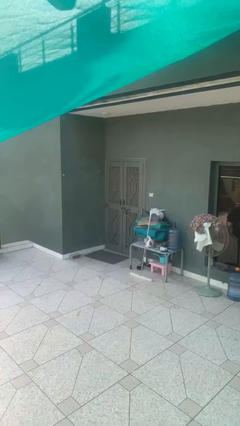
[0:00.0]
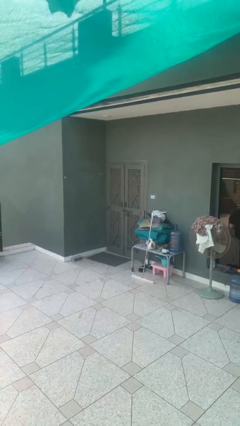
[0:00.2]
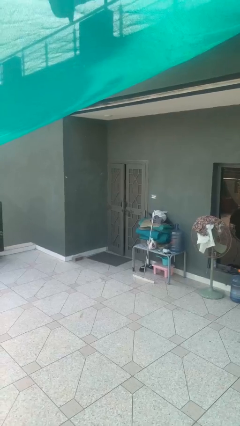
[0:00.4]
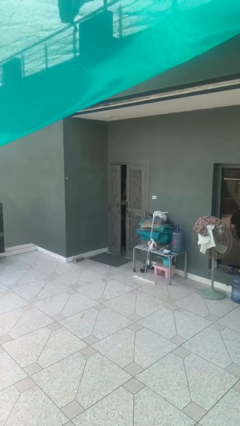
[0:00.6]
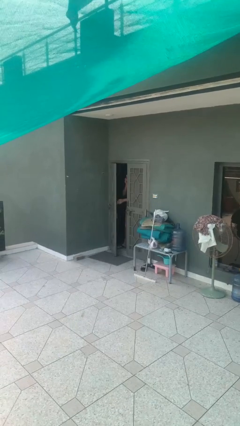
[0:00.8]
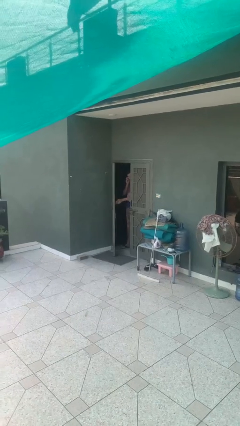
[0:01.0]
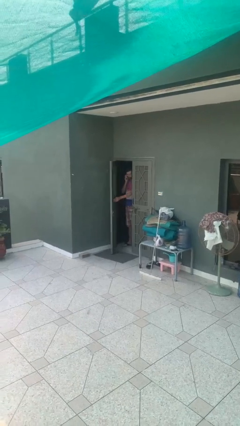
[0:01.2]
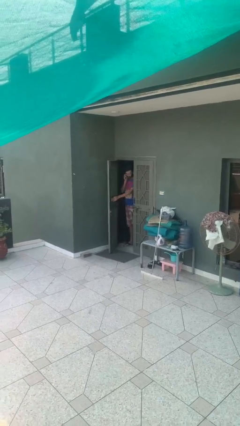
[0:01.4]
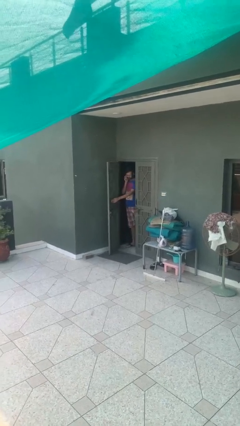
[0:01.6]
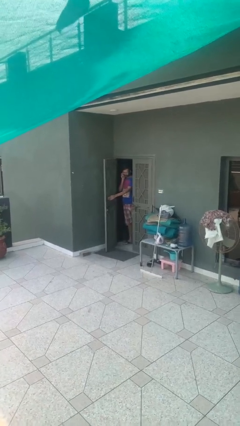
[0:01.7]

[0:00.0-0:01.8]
person opens facility door

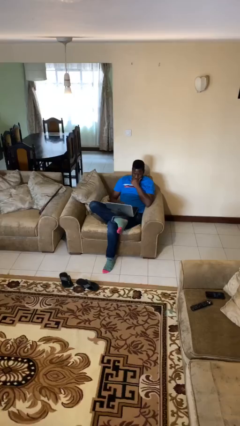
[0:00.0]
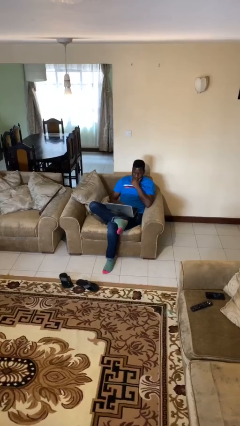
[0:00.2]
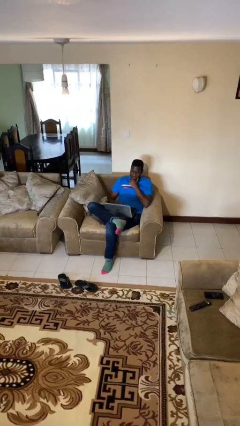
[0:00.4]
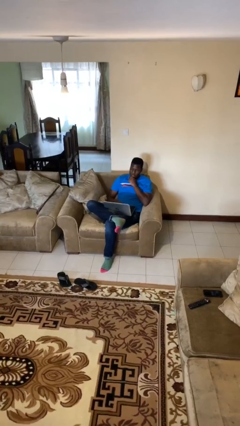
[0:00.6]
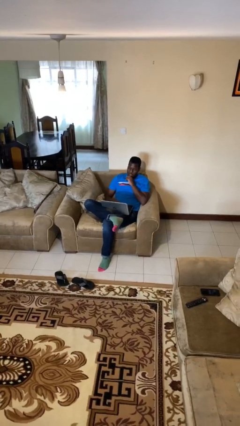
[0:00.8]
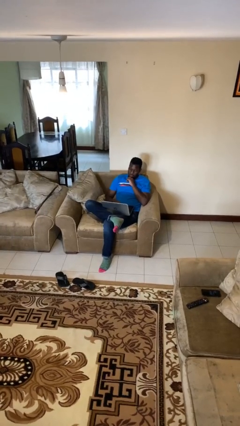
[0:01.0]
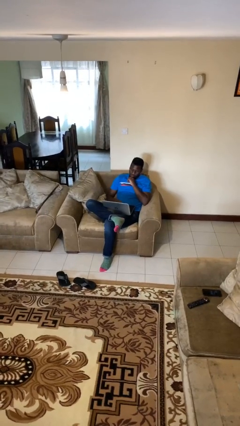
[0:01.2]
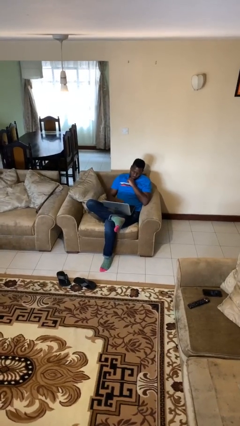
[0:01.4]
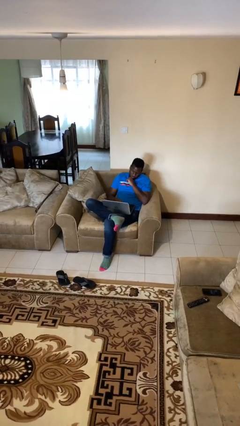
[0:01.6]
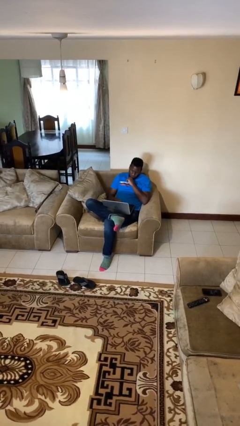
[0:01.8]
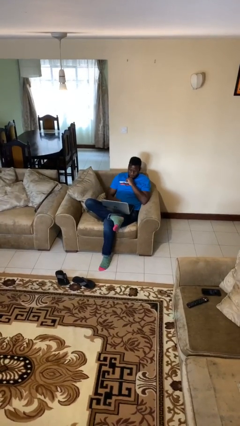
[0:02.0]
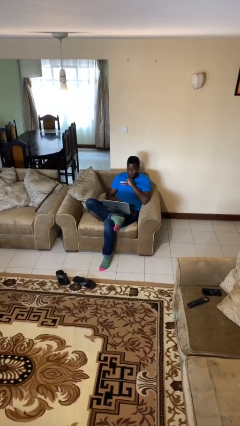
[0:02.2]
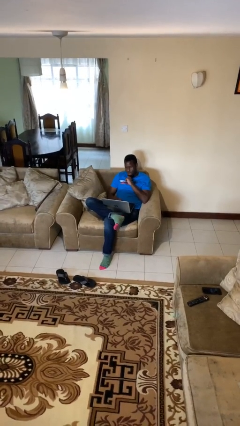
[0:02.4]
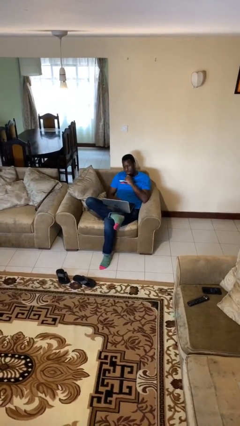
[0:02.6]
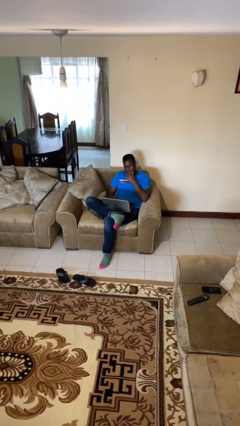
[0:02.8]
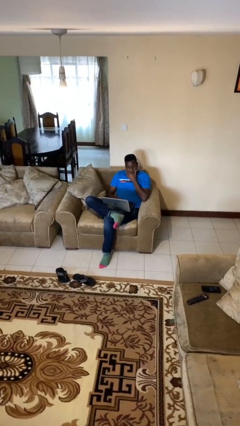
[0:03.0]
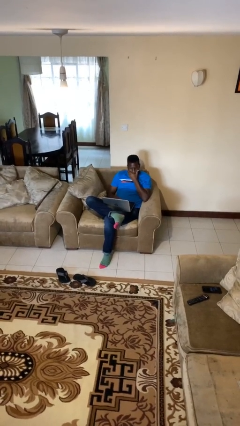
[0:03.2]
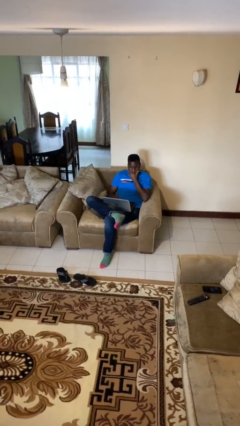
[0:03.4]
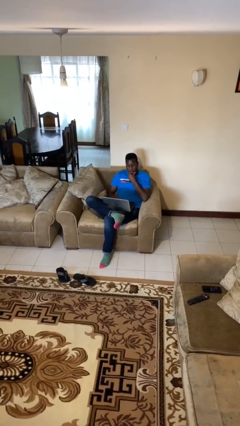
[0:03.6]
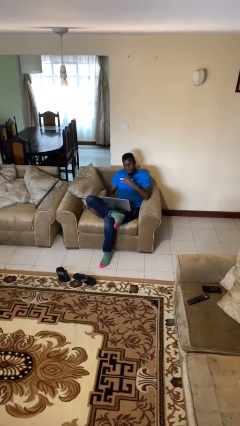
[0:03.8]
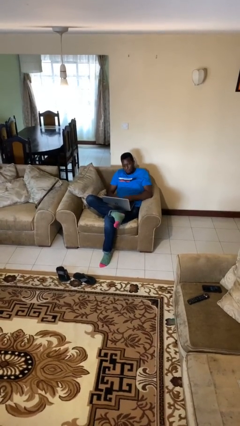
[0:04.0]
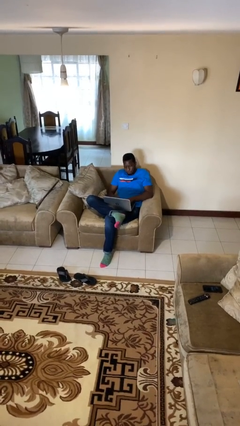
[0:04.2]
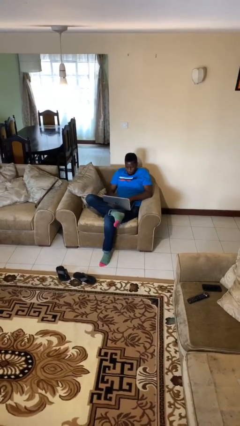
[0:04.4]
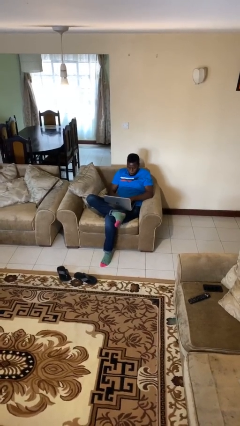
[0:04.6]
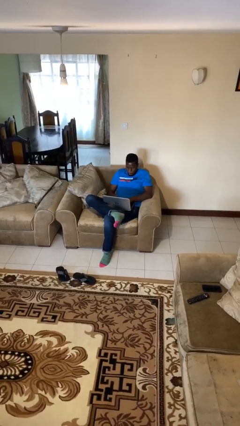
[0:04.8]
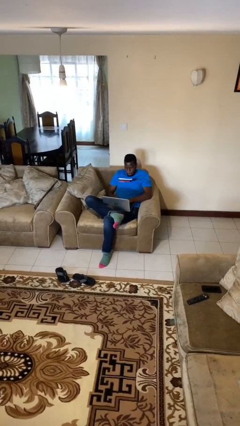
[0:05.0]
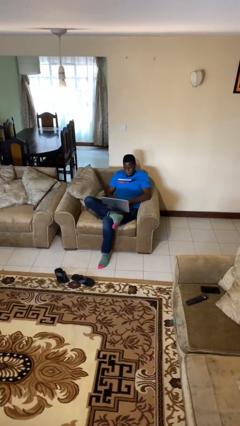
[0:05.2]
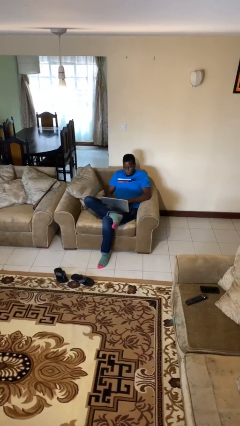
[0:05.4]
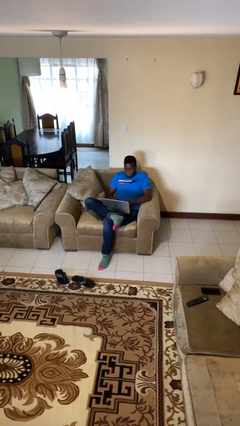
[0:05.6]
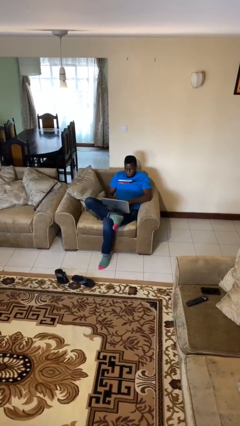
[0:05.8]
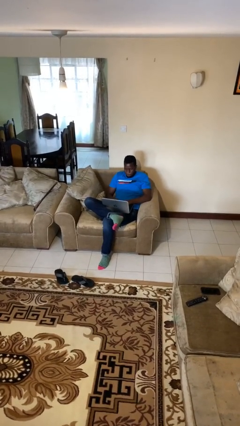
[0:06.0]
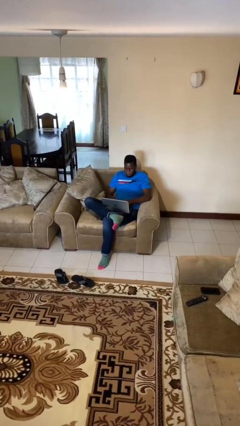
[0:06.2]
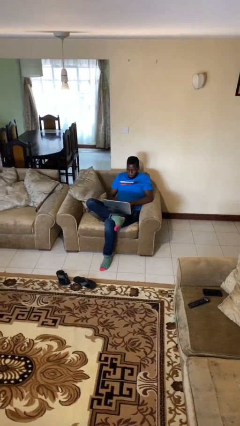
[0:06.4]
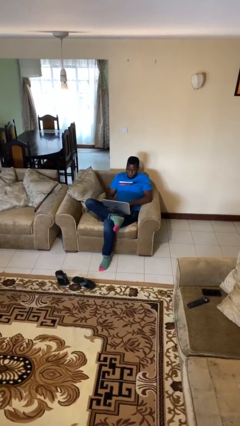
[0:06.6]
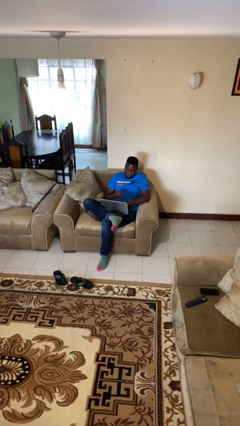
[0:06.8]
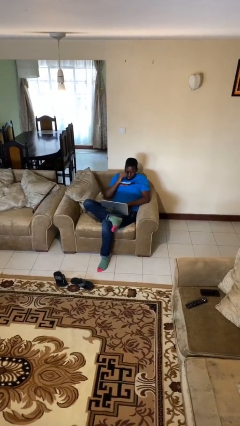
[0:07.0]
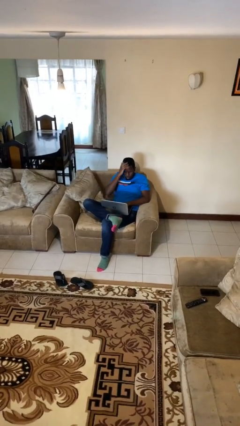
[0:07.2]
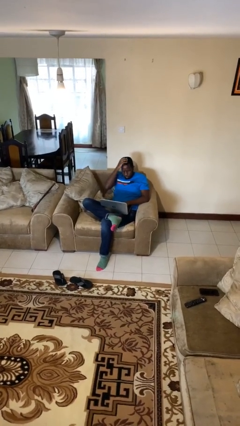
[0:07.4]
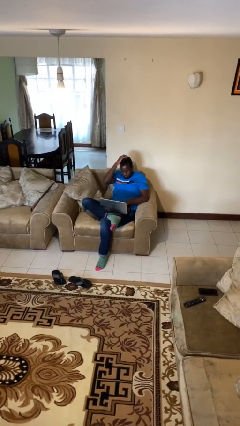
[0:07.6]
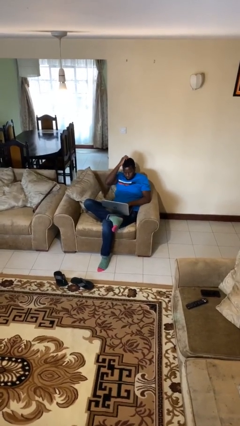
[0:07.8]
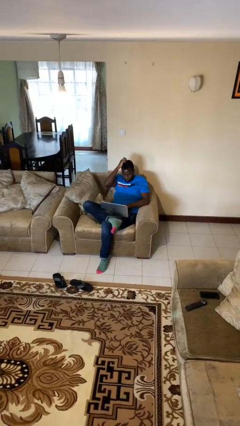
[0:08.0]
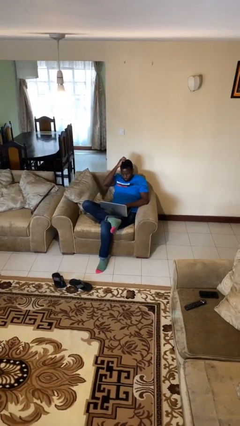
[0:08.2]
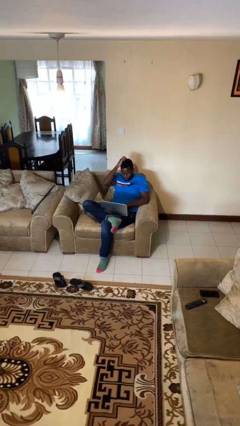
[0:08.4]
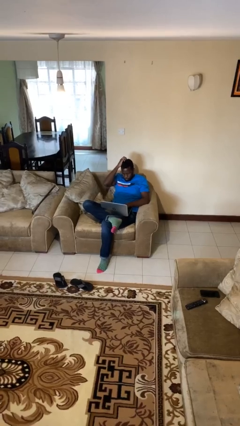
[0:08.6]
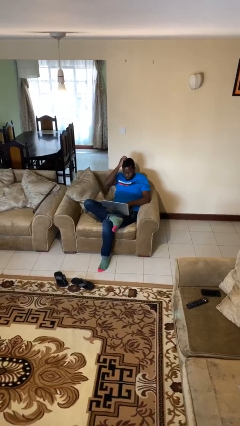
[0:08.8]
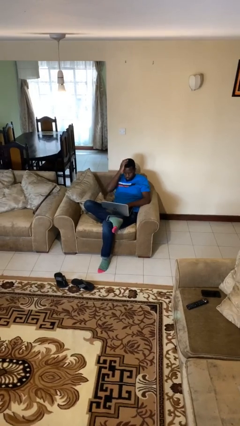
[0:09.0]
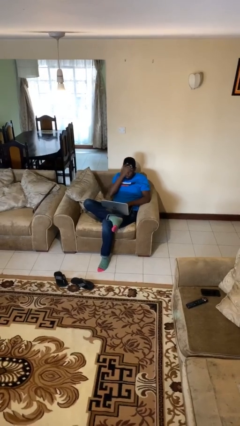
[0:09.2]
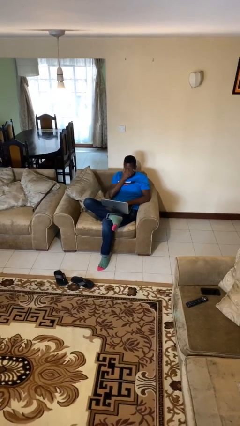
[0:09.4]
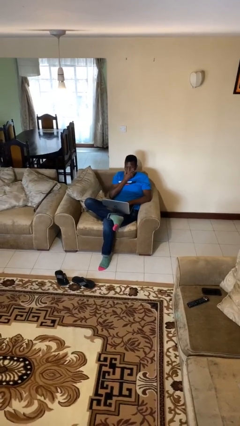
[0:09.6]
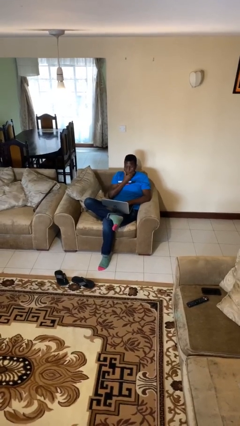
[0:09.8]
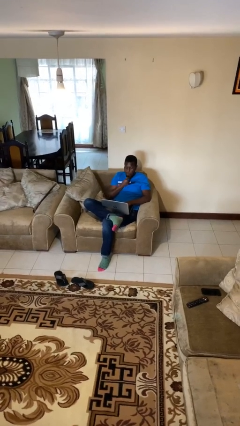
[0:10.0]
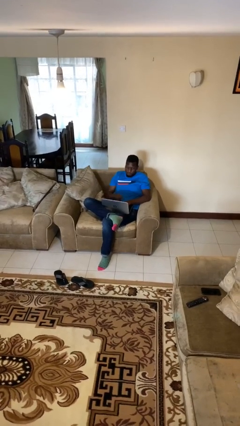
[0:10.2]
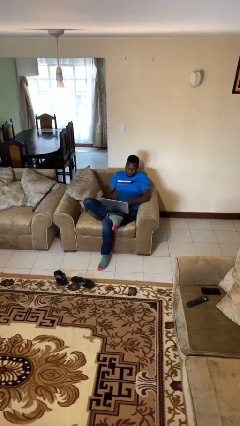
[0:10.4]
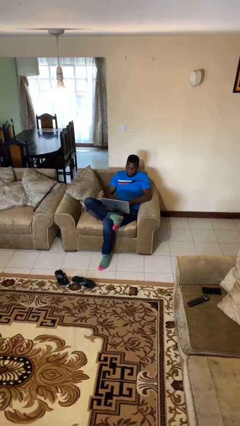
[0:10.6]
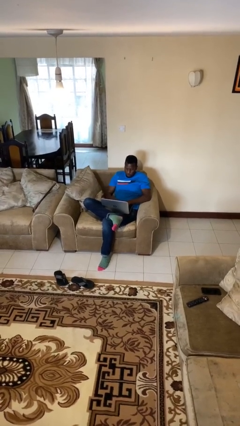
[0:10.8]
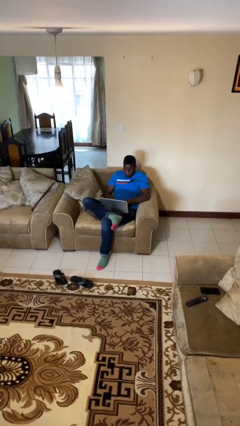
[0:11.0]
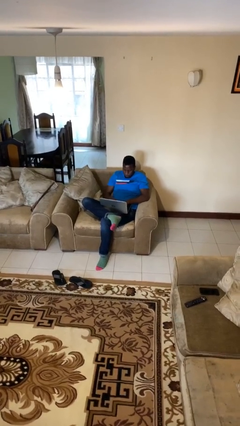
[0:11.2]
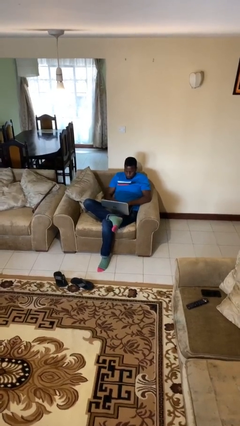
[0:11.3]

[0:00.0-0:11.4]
person interacts with laptop

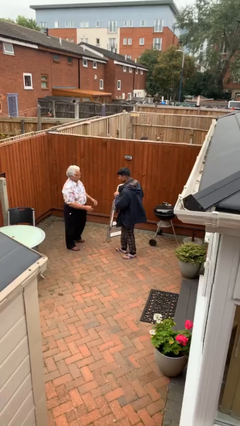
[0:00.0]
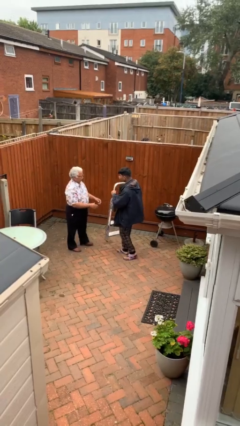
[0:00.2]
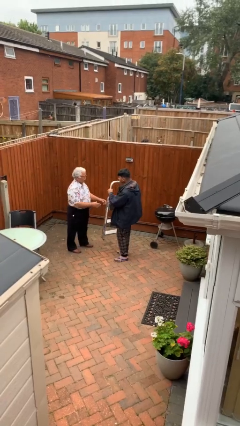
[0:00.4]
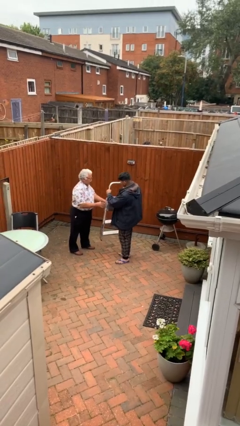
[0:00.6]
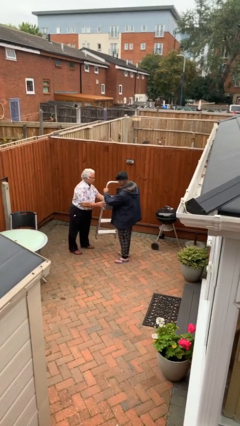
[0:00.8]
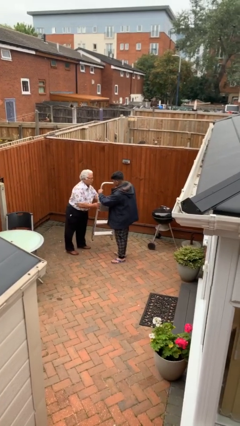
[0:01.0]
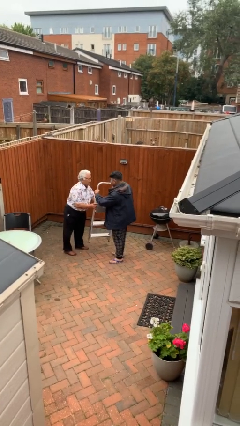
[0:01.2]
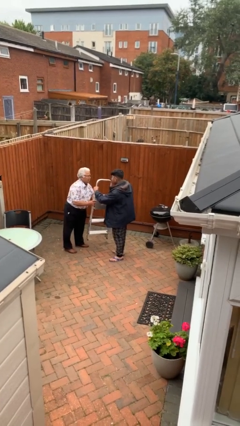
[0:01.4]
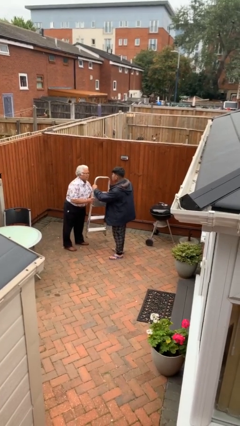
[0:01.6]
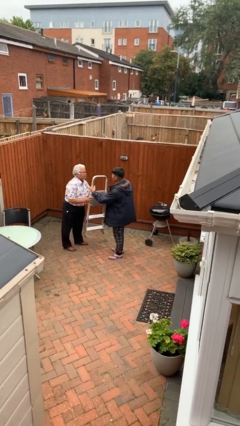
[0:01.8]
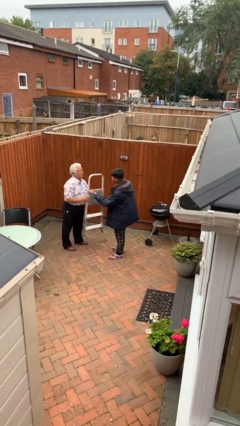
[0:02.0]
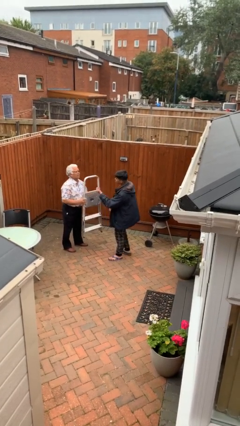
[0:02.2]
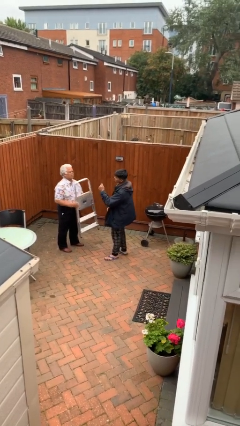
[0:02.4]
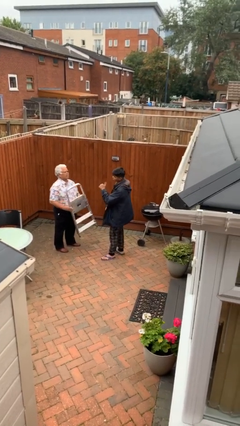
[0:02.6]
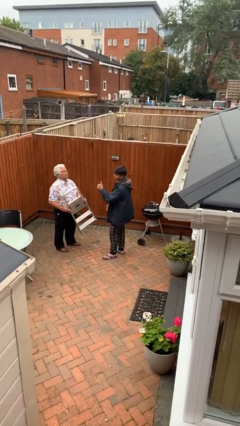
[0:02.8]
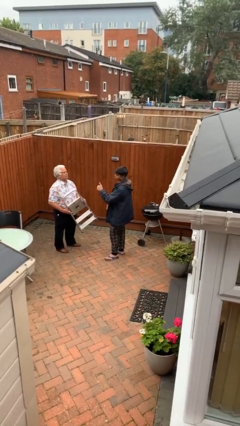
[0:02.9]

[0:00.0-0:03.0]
person transfers object to person

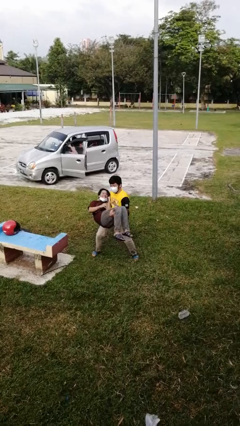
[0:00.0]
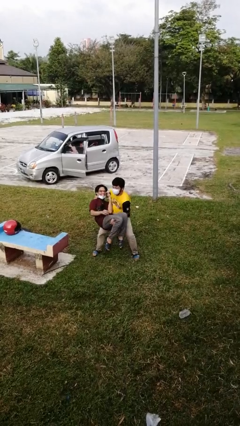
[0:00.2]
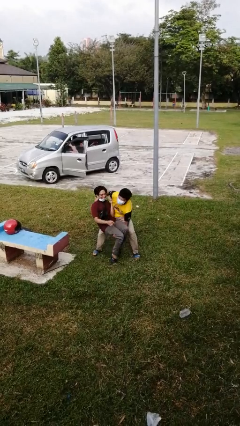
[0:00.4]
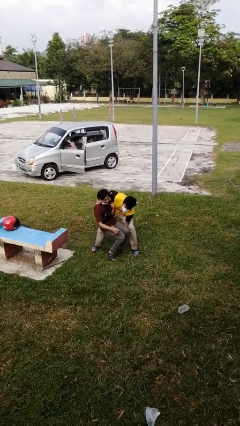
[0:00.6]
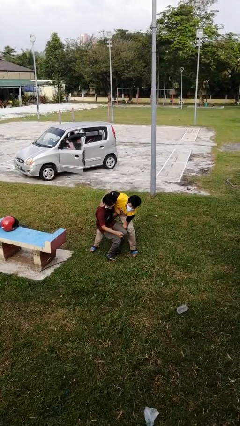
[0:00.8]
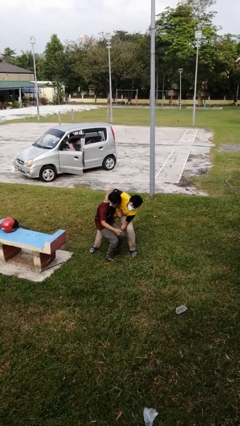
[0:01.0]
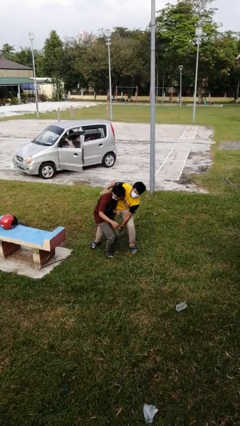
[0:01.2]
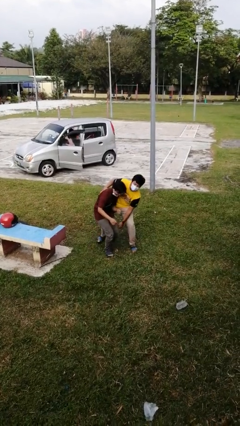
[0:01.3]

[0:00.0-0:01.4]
person puts down person

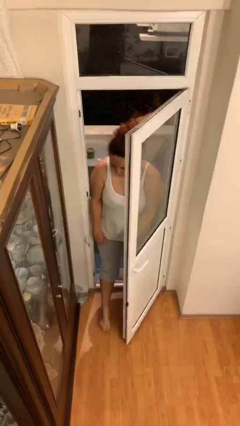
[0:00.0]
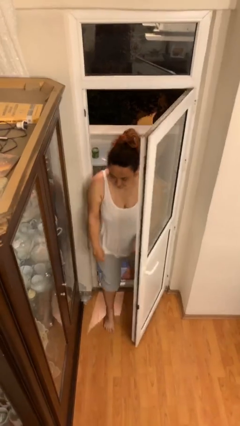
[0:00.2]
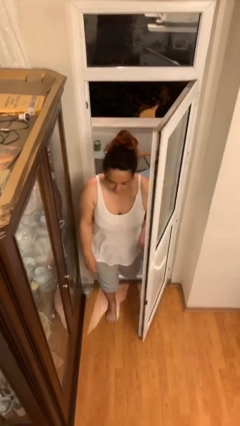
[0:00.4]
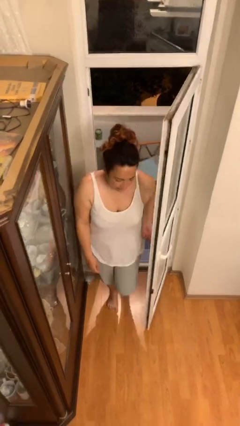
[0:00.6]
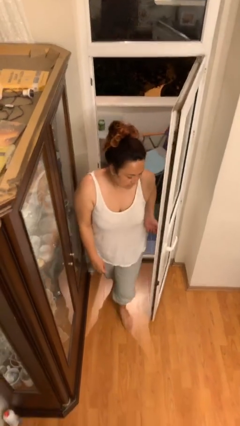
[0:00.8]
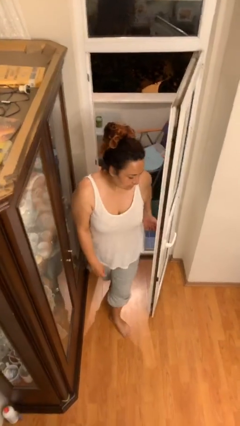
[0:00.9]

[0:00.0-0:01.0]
person enters scene through structure
